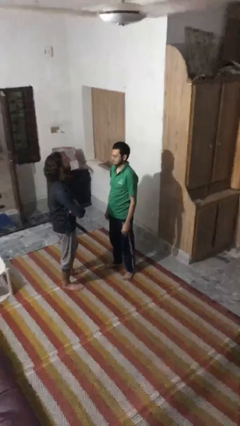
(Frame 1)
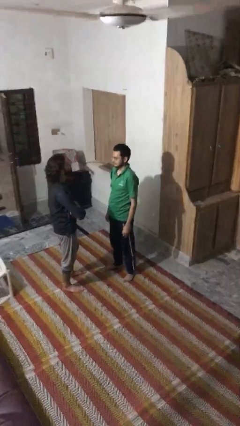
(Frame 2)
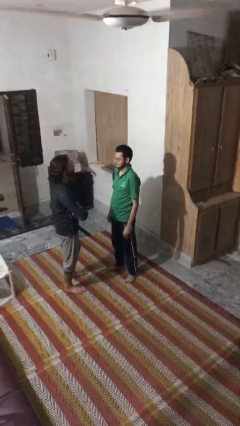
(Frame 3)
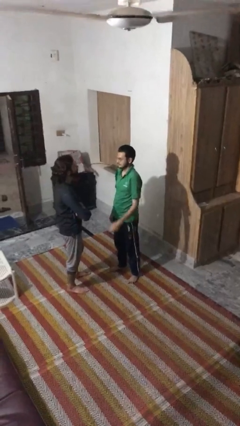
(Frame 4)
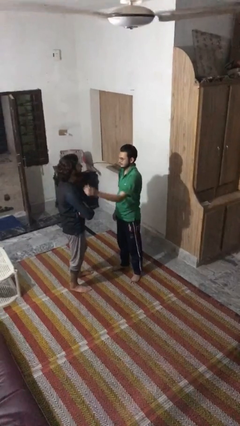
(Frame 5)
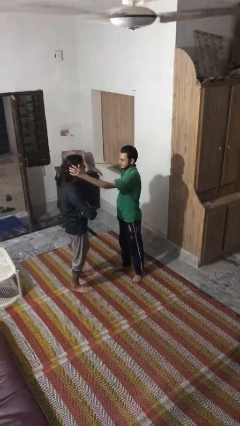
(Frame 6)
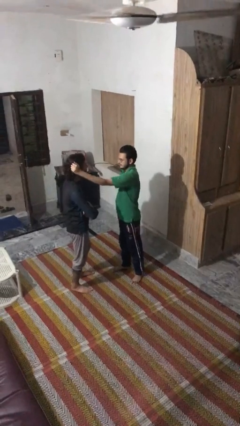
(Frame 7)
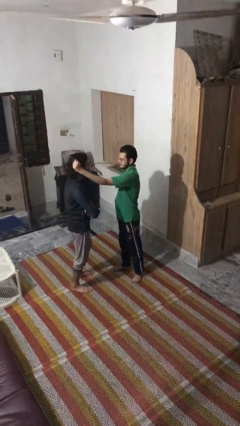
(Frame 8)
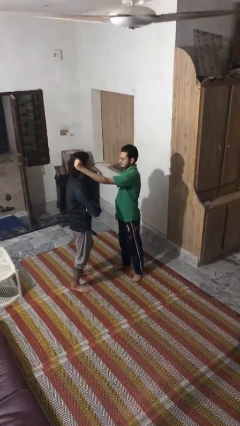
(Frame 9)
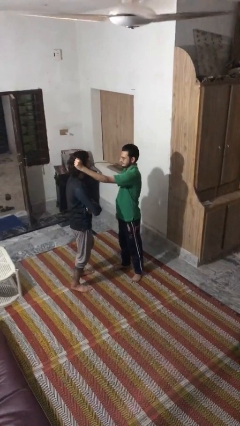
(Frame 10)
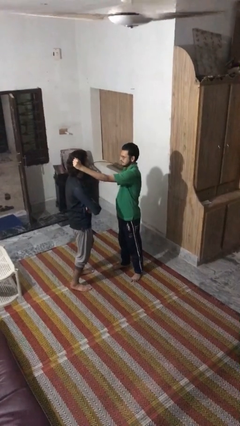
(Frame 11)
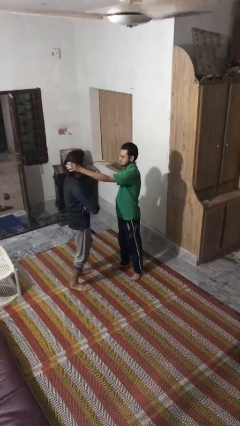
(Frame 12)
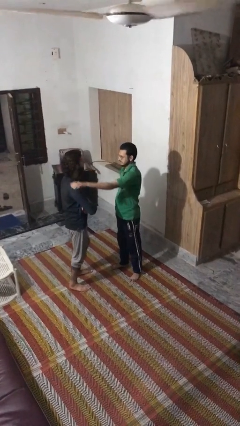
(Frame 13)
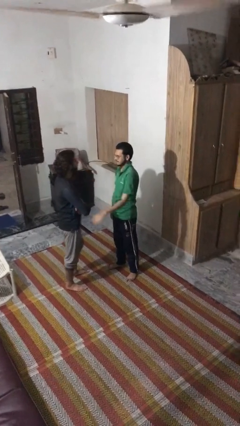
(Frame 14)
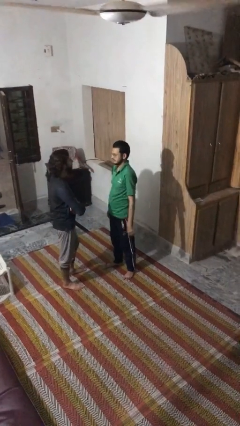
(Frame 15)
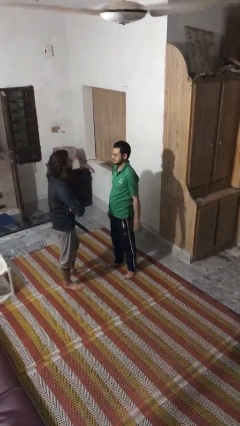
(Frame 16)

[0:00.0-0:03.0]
person grabs person by hair

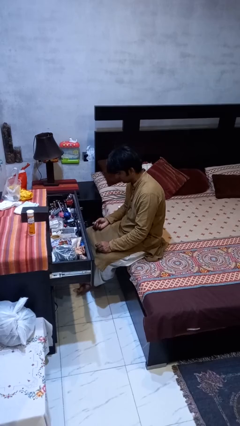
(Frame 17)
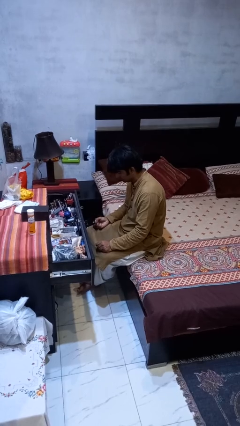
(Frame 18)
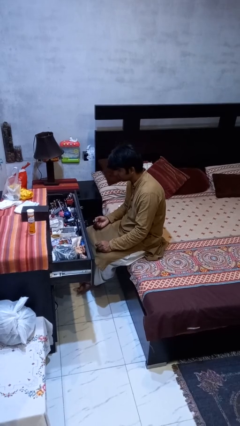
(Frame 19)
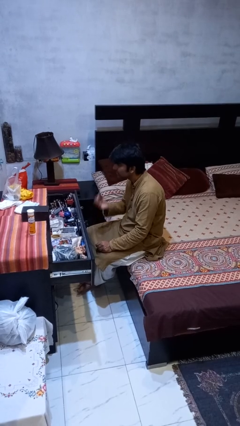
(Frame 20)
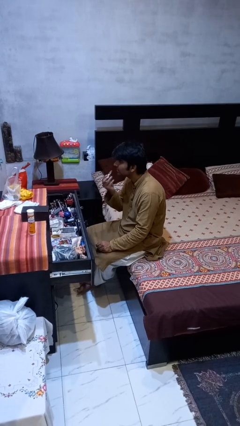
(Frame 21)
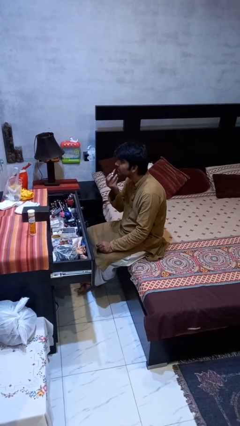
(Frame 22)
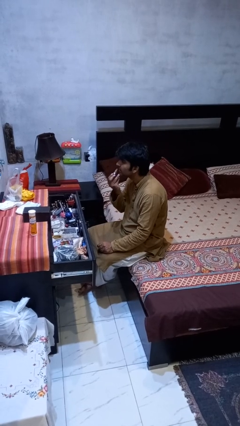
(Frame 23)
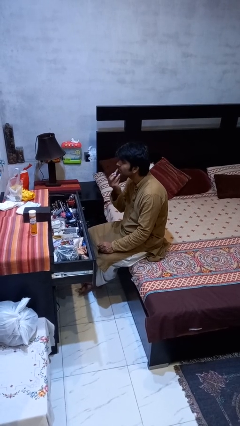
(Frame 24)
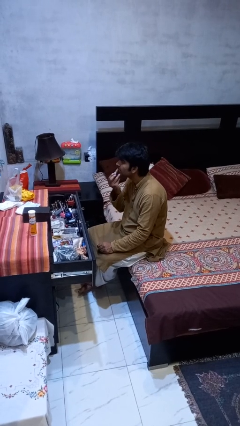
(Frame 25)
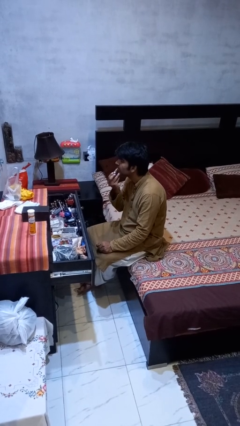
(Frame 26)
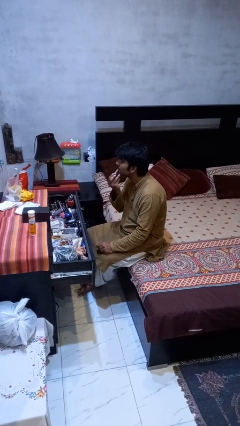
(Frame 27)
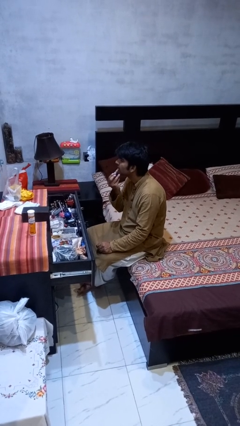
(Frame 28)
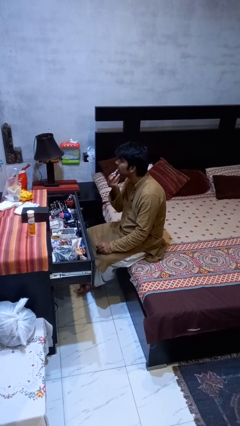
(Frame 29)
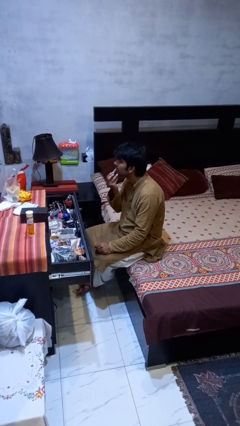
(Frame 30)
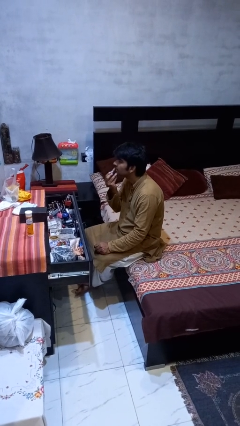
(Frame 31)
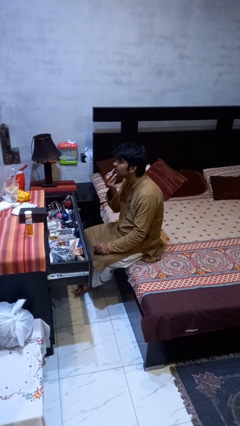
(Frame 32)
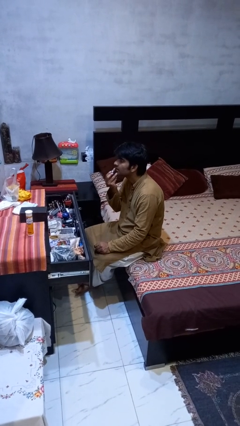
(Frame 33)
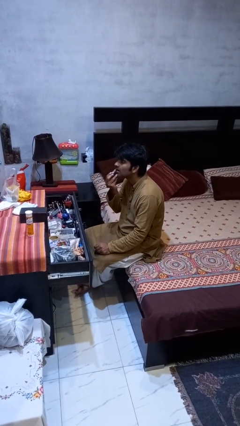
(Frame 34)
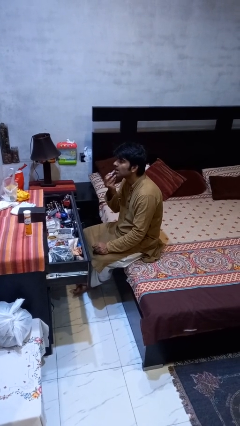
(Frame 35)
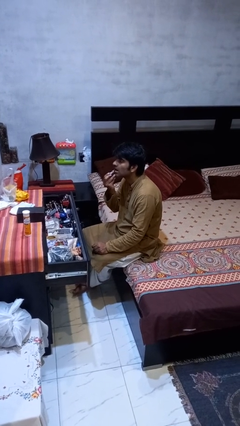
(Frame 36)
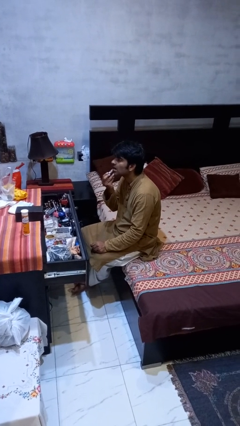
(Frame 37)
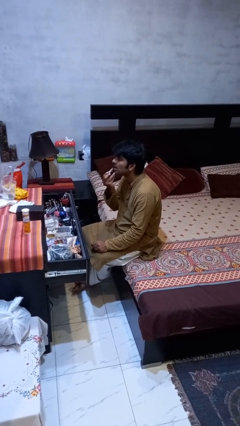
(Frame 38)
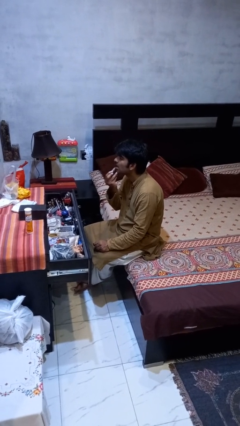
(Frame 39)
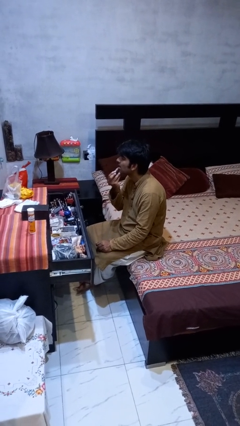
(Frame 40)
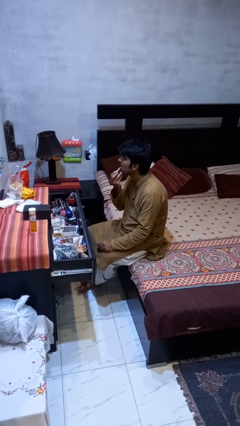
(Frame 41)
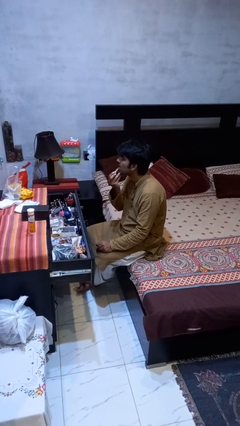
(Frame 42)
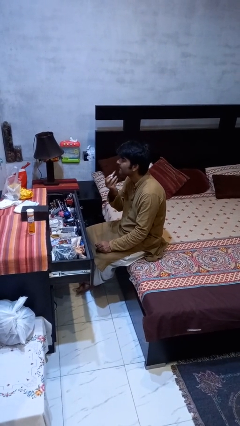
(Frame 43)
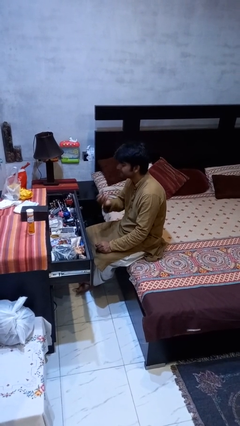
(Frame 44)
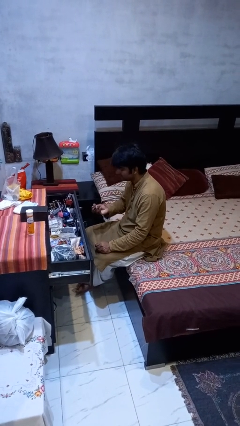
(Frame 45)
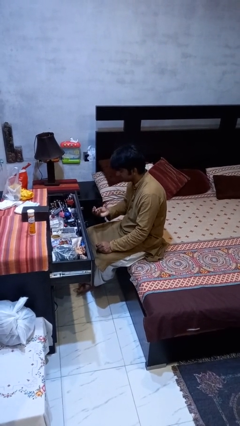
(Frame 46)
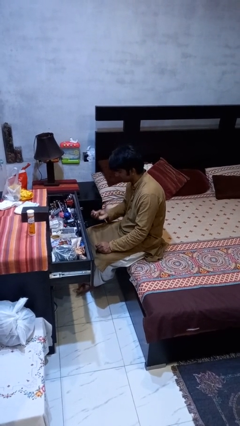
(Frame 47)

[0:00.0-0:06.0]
person applies lip makeup

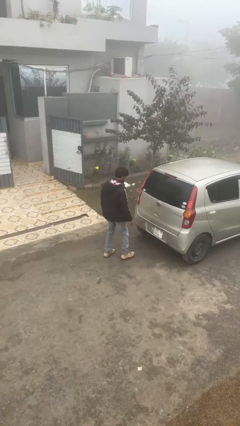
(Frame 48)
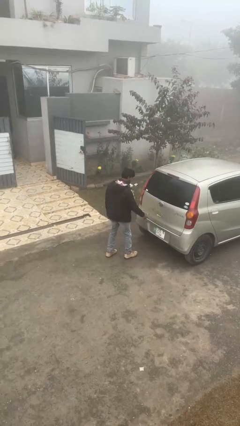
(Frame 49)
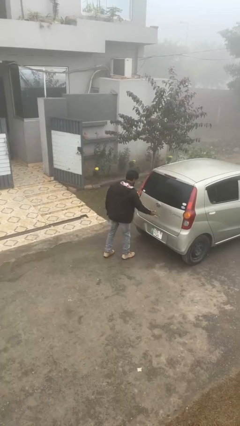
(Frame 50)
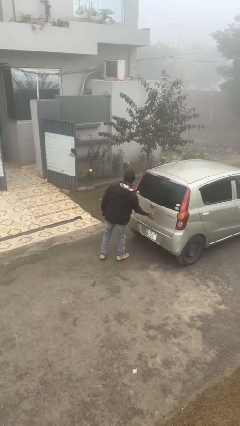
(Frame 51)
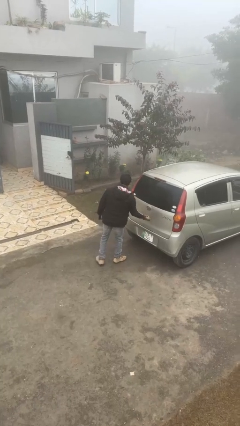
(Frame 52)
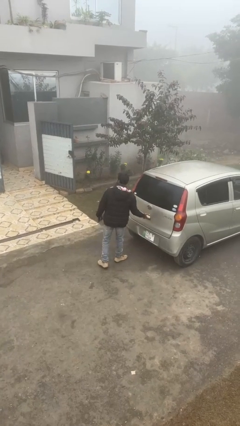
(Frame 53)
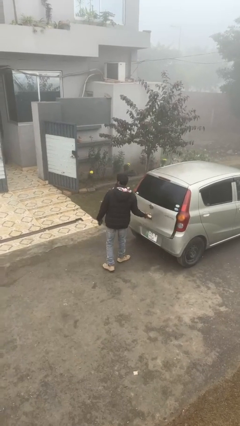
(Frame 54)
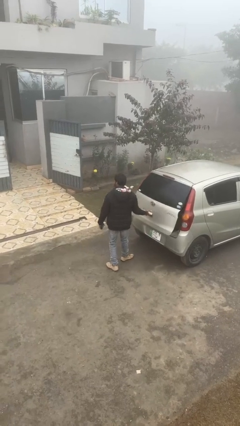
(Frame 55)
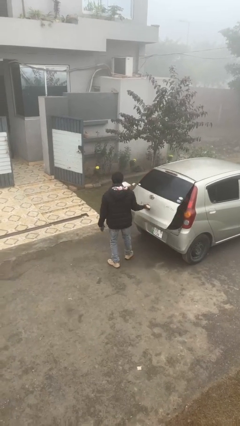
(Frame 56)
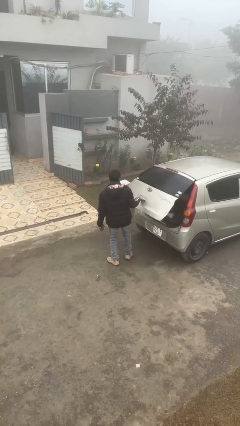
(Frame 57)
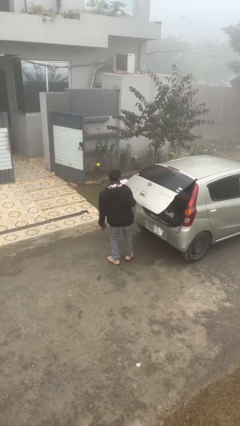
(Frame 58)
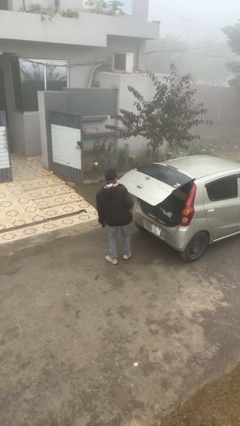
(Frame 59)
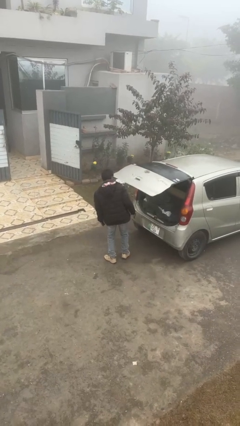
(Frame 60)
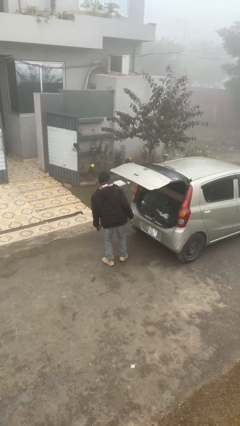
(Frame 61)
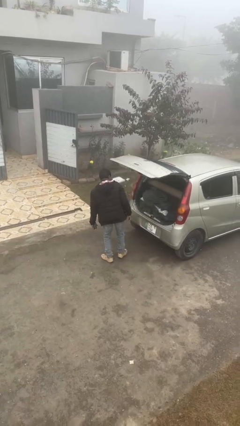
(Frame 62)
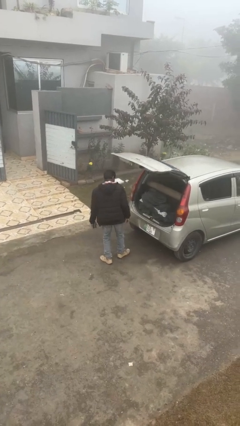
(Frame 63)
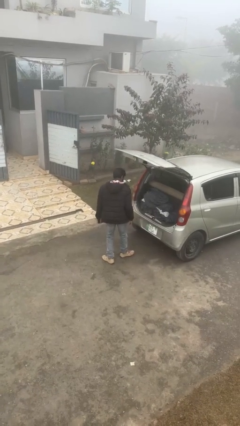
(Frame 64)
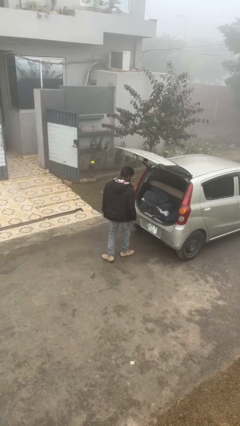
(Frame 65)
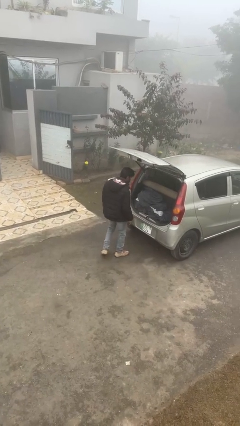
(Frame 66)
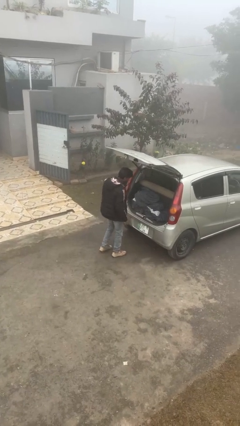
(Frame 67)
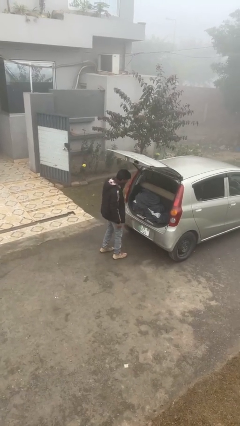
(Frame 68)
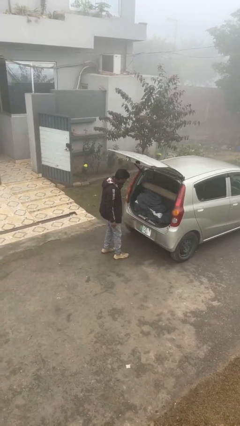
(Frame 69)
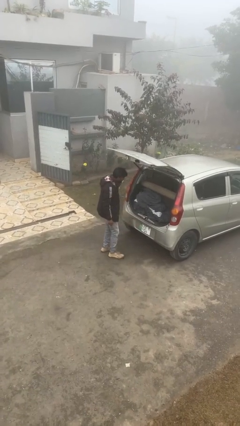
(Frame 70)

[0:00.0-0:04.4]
person opens car trunk

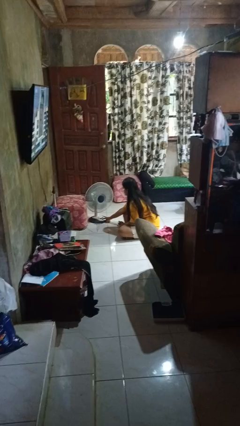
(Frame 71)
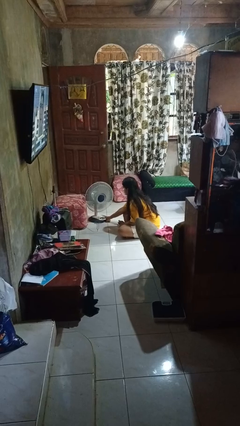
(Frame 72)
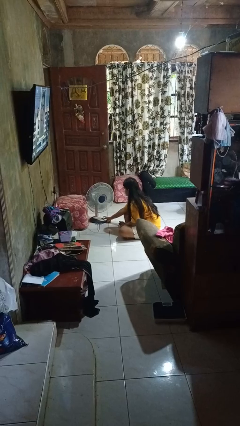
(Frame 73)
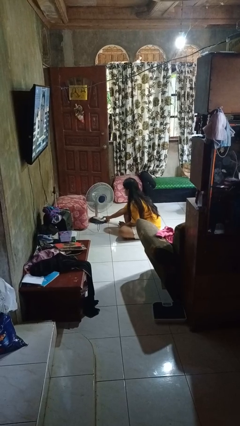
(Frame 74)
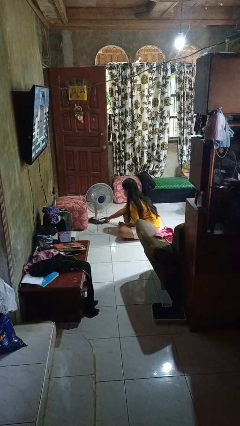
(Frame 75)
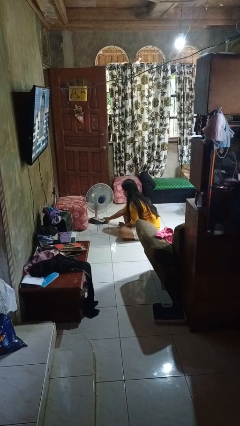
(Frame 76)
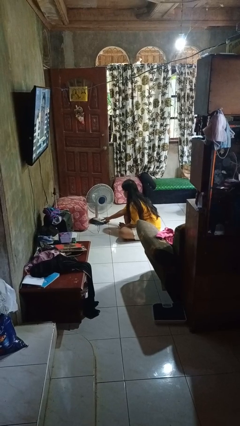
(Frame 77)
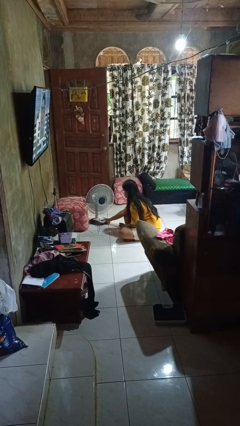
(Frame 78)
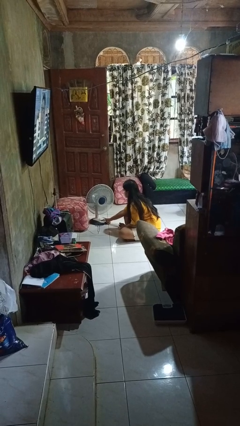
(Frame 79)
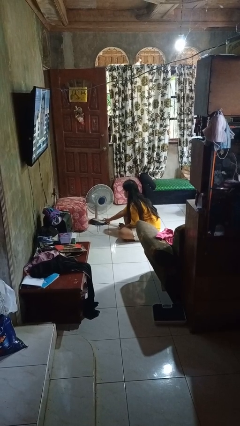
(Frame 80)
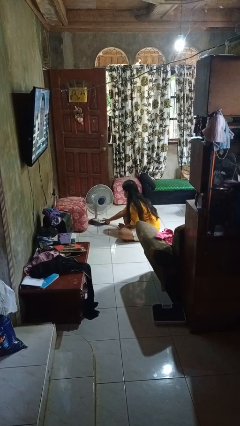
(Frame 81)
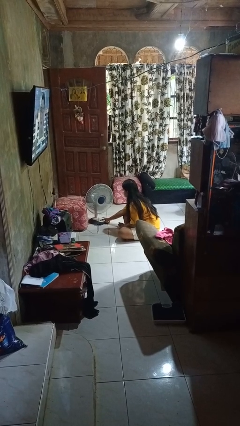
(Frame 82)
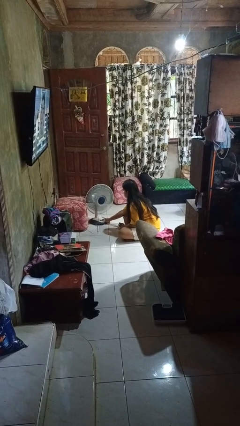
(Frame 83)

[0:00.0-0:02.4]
person turns on fan

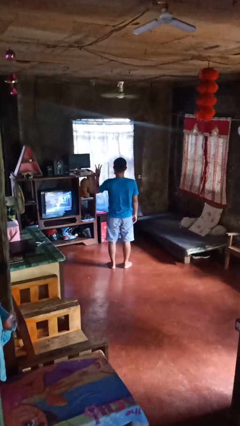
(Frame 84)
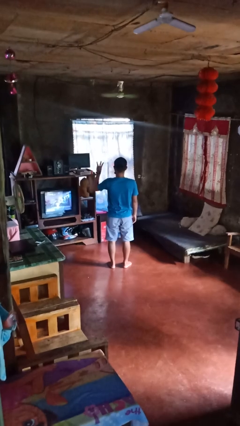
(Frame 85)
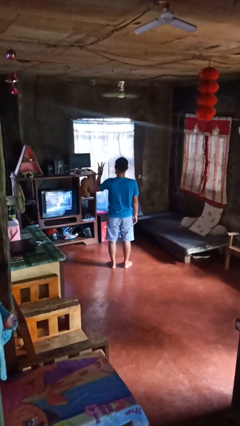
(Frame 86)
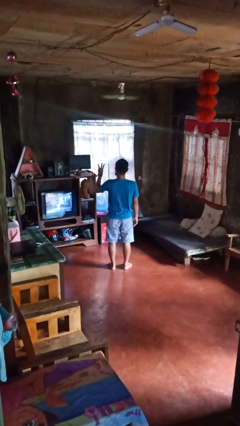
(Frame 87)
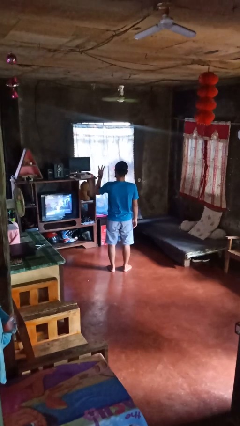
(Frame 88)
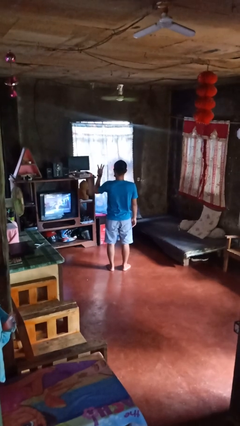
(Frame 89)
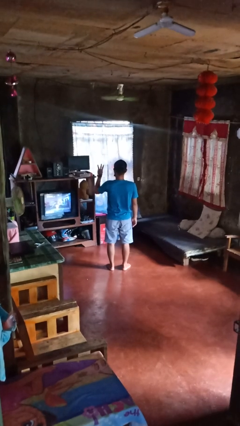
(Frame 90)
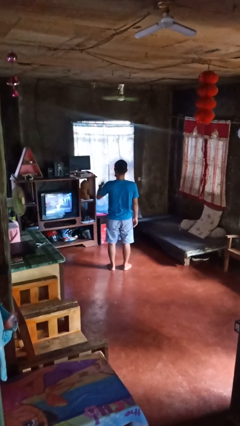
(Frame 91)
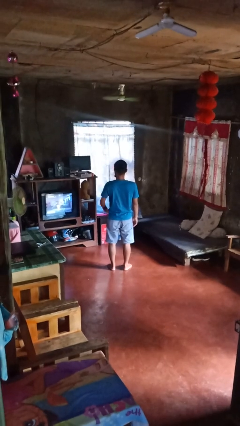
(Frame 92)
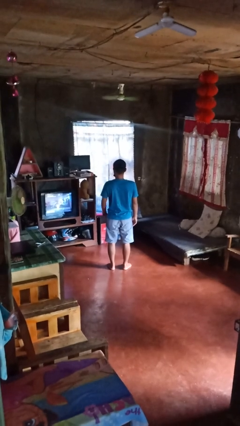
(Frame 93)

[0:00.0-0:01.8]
person gestures number three

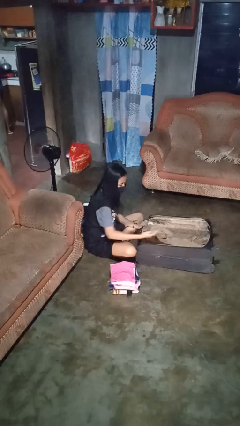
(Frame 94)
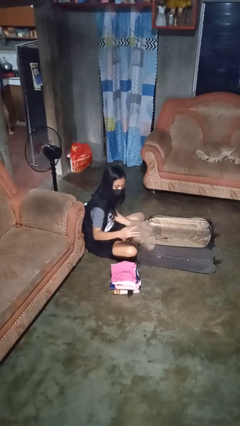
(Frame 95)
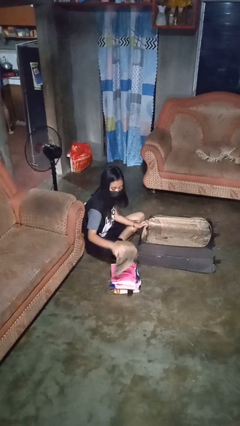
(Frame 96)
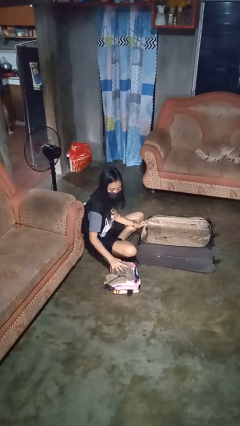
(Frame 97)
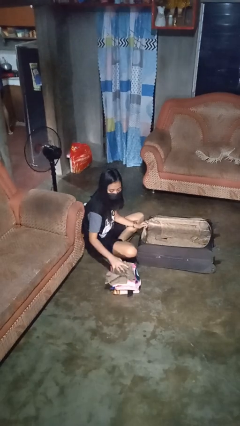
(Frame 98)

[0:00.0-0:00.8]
person unloads clothes from suitcase
